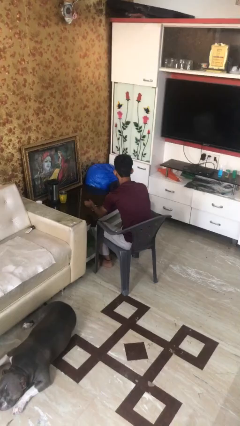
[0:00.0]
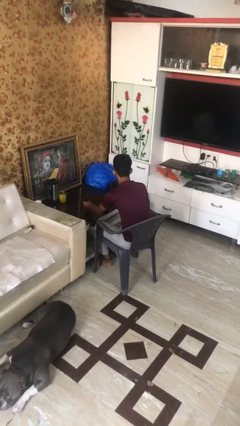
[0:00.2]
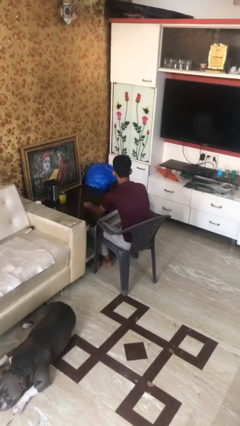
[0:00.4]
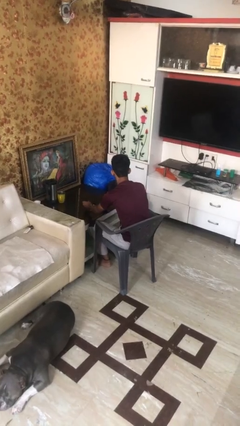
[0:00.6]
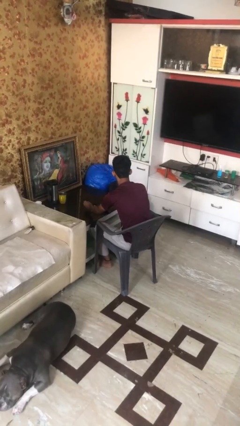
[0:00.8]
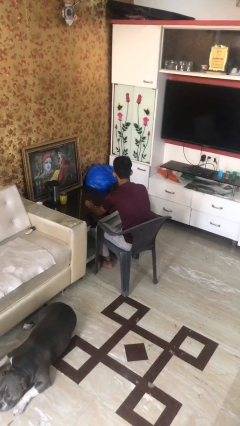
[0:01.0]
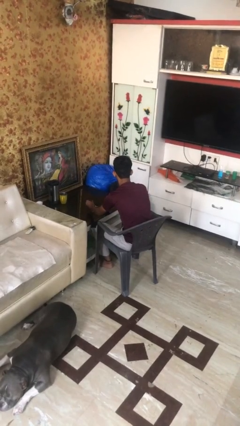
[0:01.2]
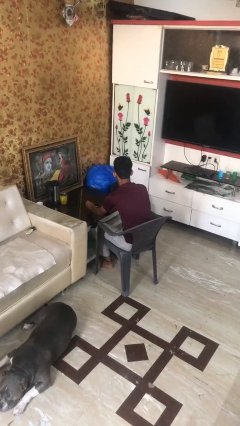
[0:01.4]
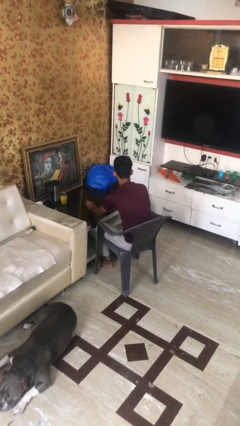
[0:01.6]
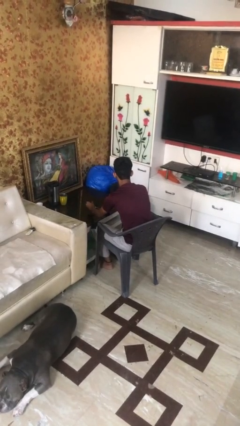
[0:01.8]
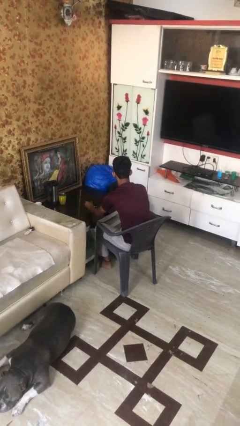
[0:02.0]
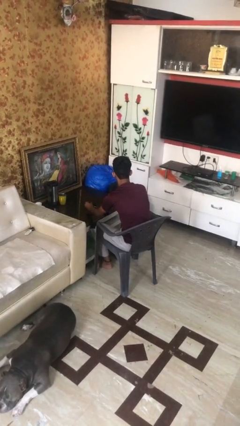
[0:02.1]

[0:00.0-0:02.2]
person paints fingernails

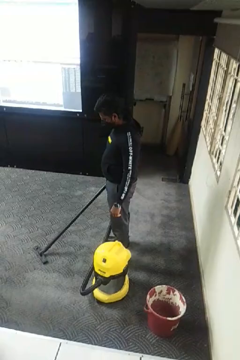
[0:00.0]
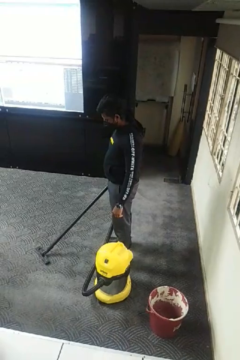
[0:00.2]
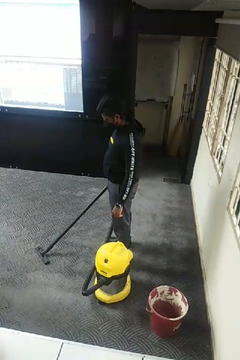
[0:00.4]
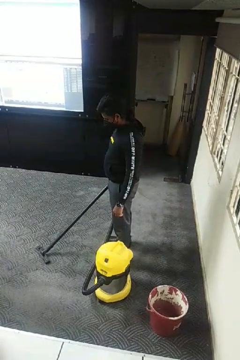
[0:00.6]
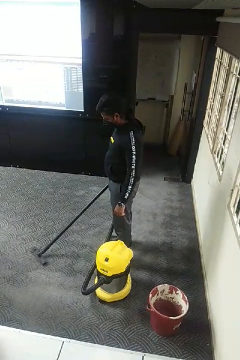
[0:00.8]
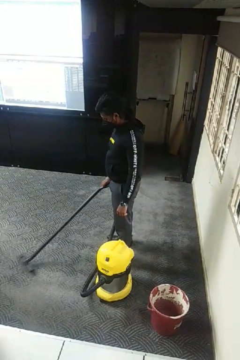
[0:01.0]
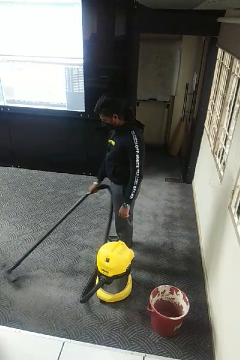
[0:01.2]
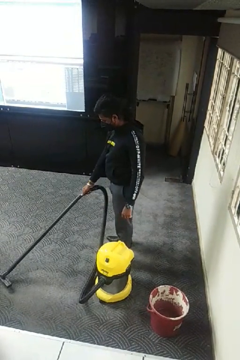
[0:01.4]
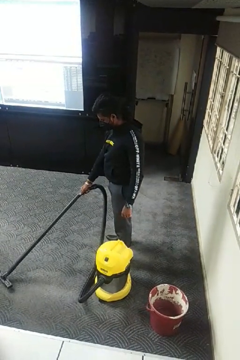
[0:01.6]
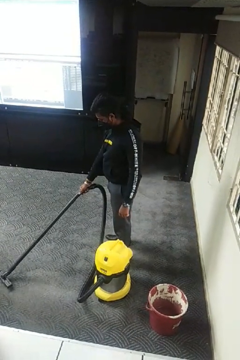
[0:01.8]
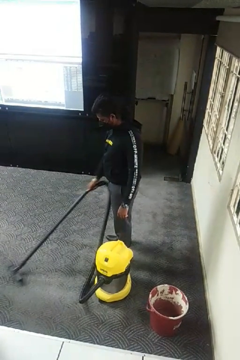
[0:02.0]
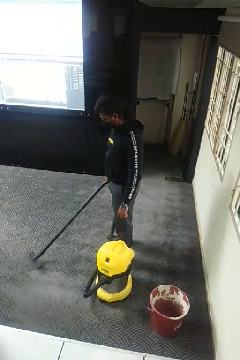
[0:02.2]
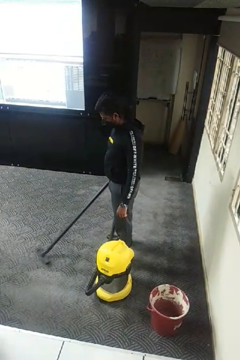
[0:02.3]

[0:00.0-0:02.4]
person vacuums carpet

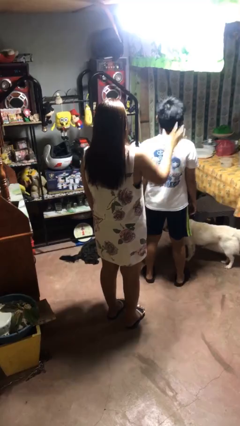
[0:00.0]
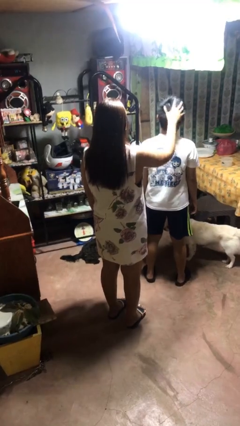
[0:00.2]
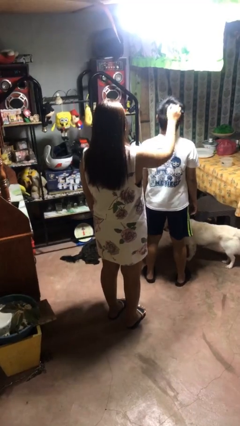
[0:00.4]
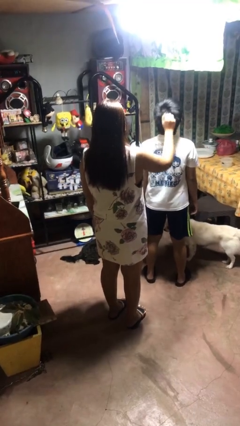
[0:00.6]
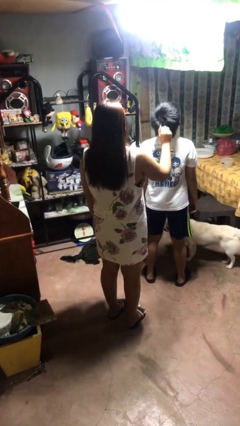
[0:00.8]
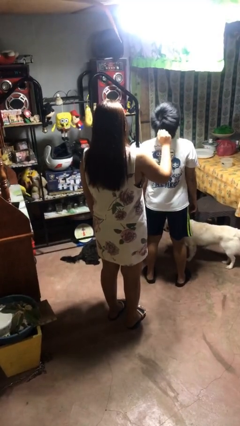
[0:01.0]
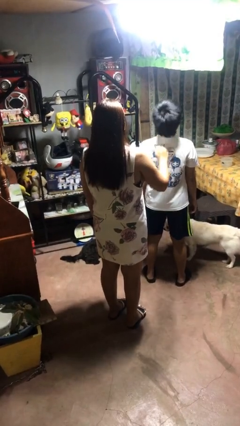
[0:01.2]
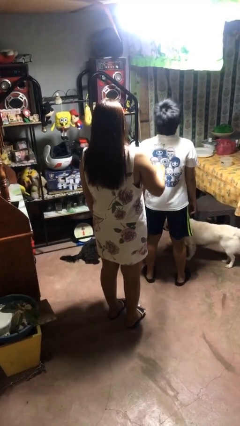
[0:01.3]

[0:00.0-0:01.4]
person grabs person by hair

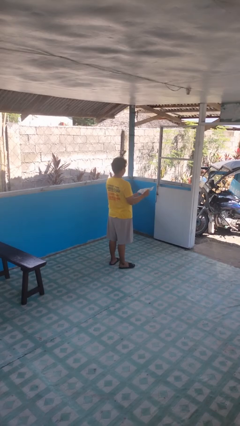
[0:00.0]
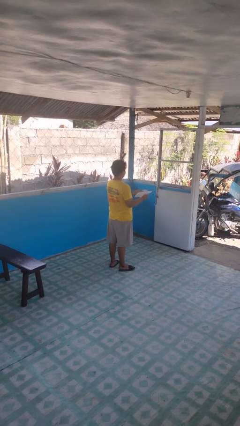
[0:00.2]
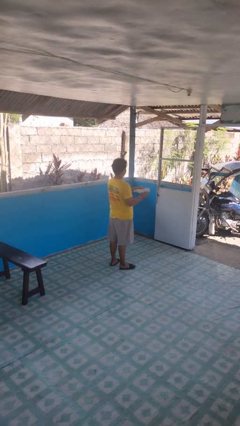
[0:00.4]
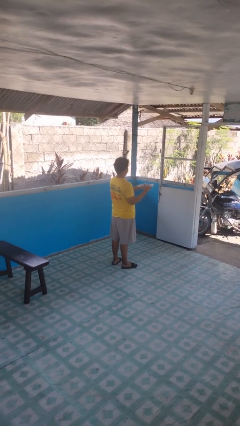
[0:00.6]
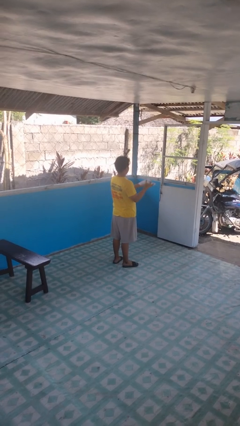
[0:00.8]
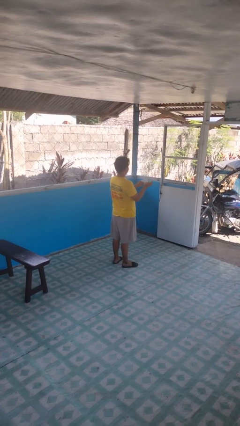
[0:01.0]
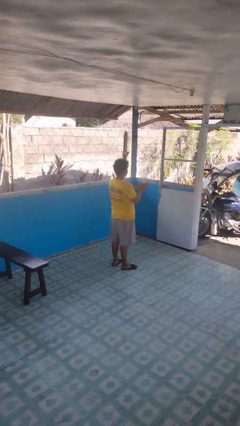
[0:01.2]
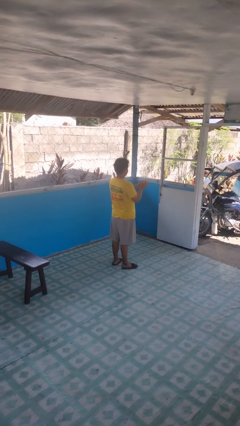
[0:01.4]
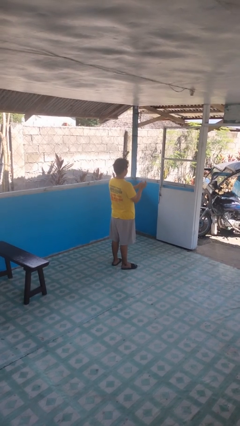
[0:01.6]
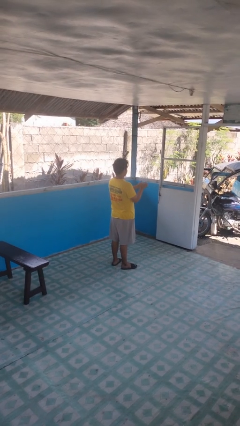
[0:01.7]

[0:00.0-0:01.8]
person crumples paper

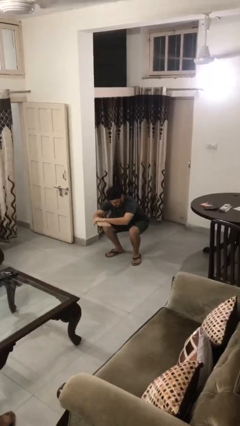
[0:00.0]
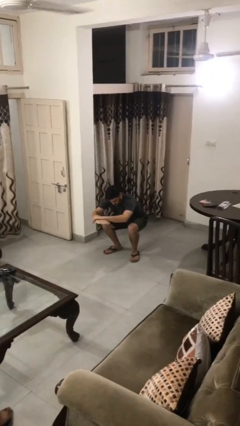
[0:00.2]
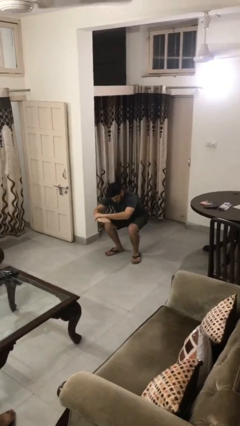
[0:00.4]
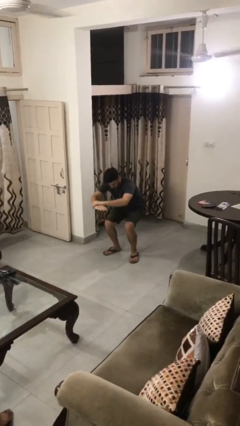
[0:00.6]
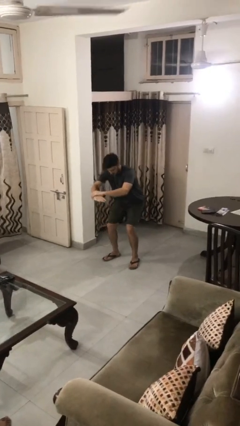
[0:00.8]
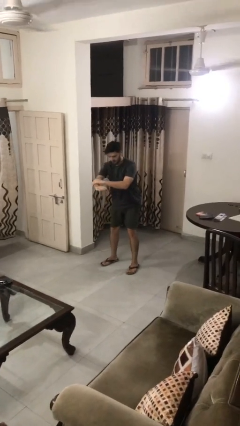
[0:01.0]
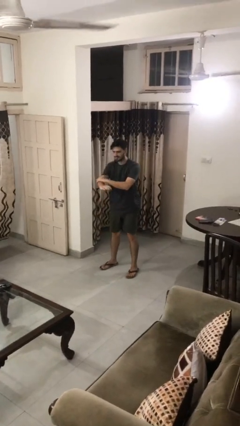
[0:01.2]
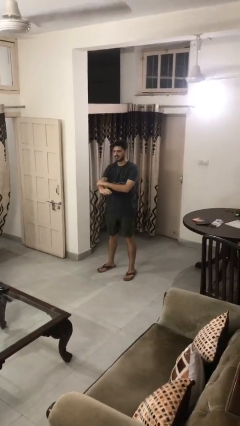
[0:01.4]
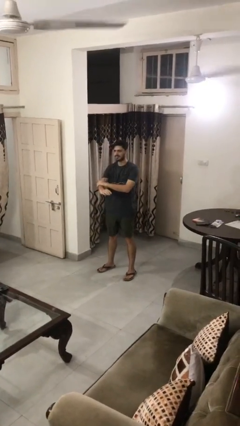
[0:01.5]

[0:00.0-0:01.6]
person stands up

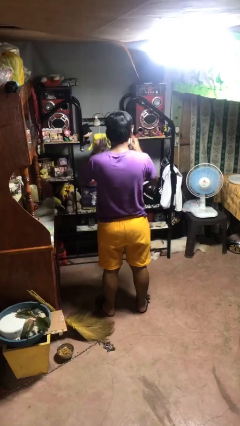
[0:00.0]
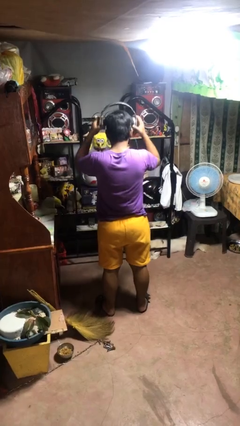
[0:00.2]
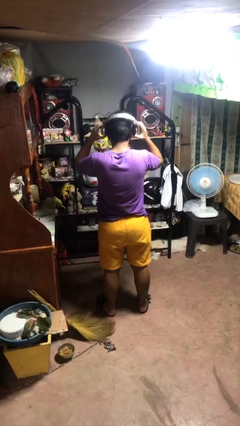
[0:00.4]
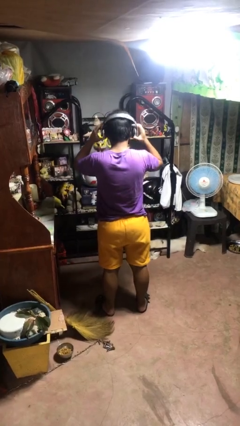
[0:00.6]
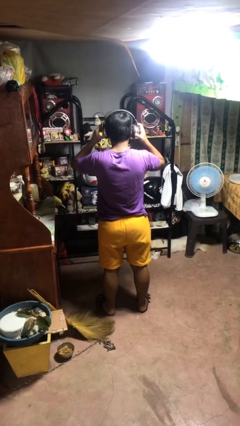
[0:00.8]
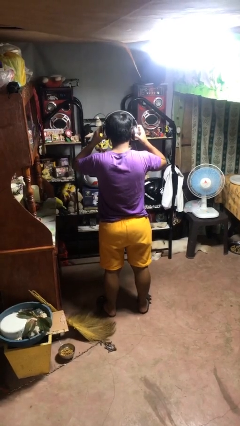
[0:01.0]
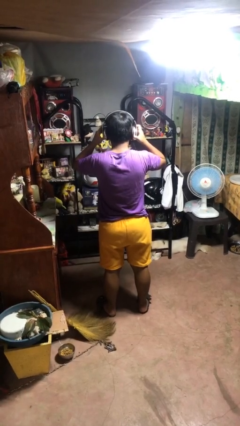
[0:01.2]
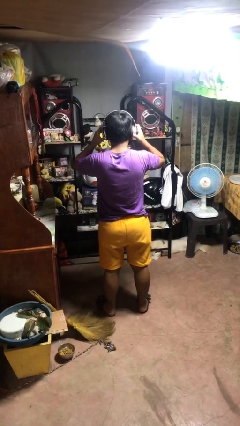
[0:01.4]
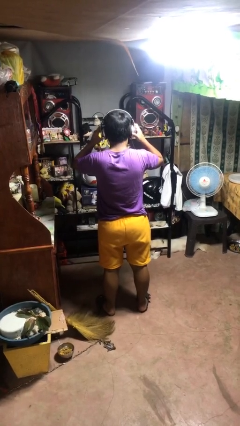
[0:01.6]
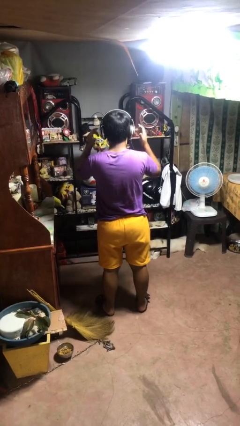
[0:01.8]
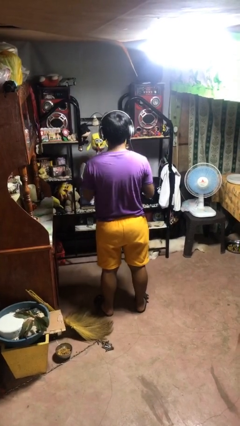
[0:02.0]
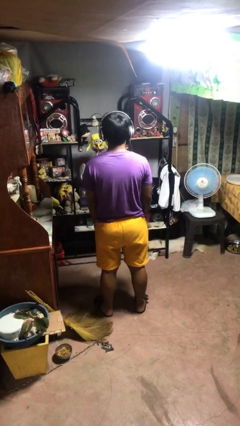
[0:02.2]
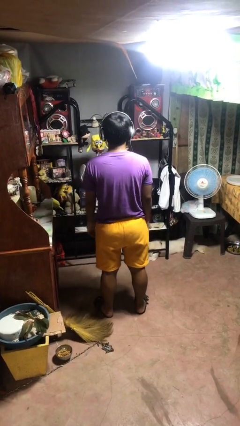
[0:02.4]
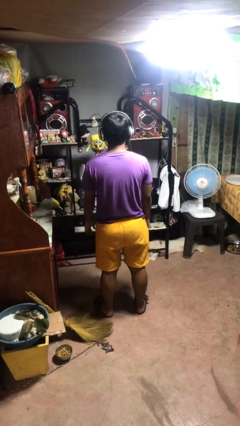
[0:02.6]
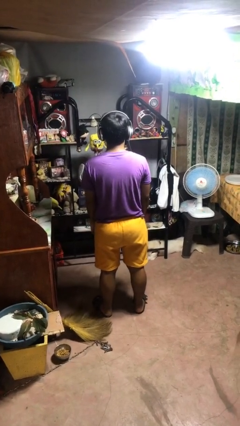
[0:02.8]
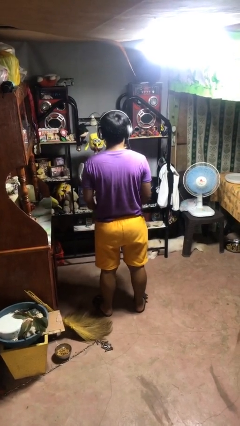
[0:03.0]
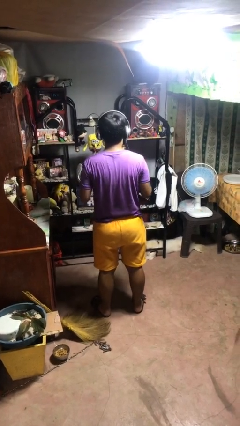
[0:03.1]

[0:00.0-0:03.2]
person puts on headphones

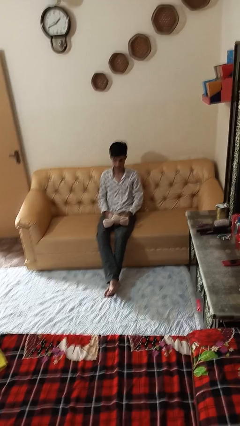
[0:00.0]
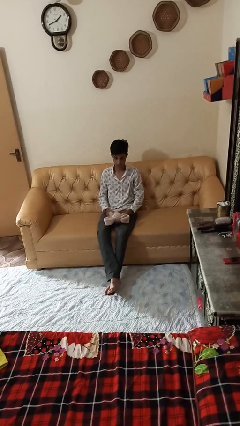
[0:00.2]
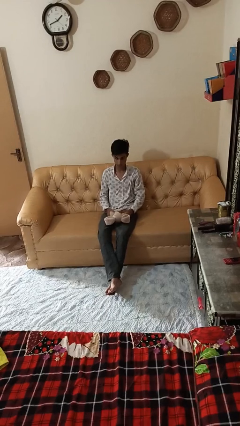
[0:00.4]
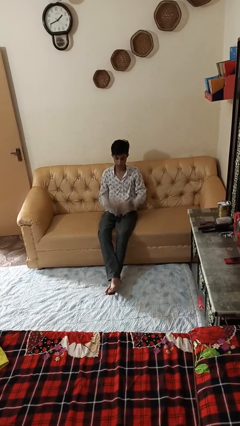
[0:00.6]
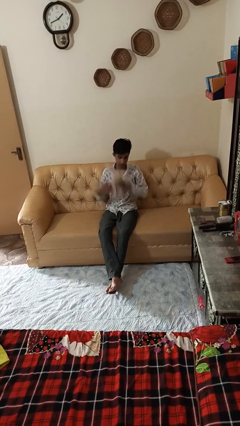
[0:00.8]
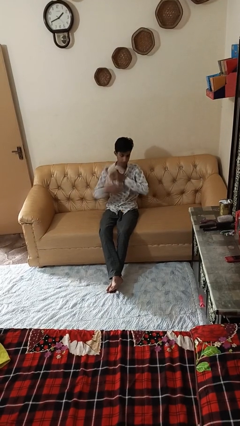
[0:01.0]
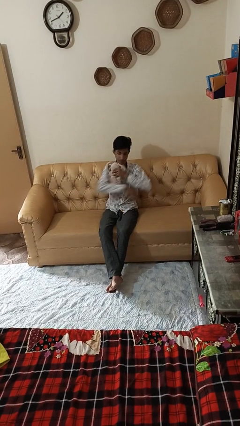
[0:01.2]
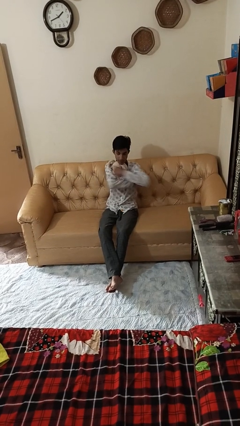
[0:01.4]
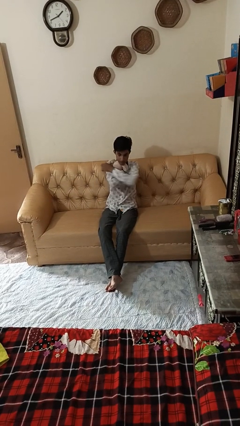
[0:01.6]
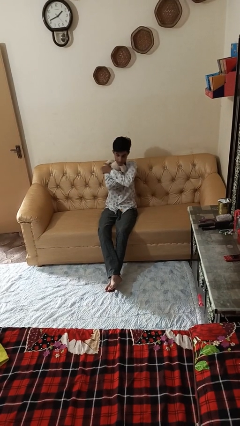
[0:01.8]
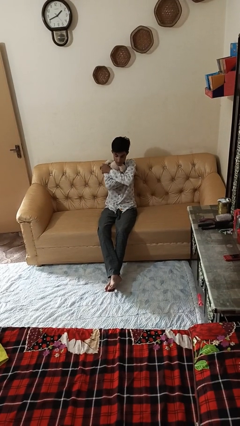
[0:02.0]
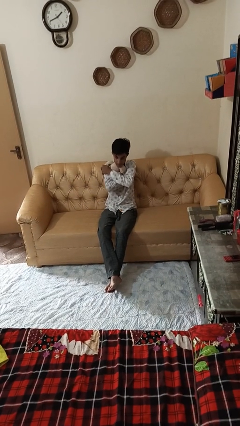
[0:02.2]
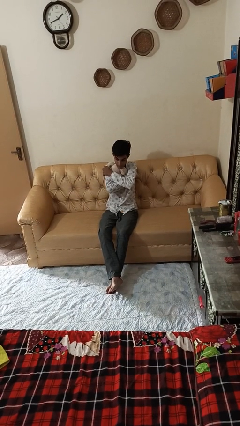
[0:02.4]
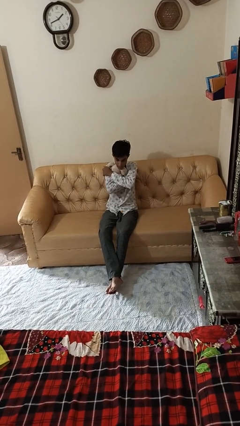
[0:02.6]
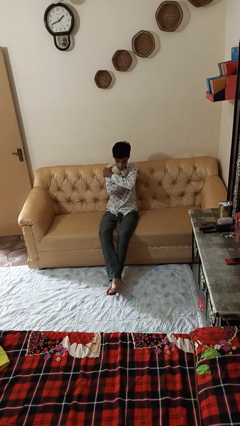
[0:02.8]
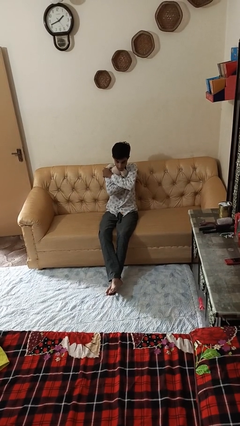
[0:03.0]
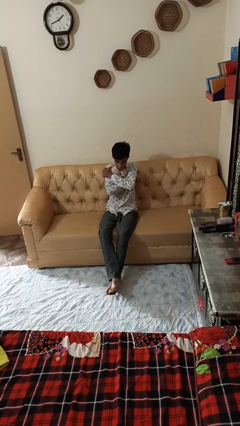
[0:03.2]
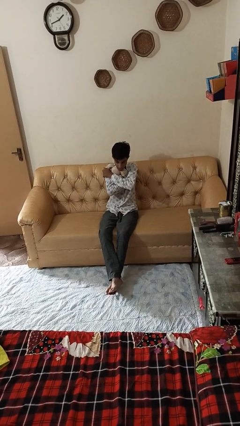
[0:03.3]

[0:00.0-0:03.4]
person hugs stuffed animal

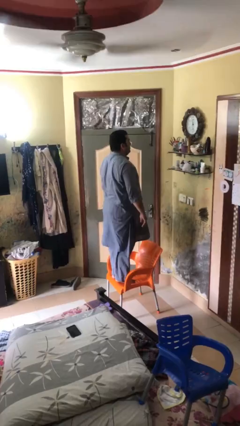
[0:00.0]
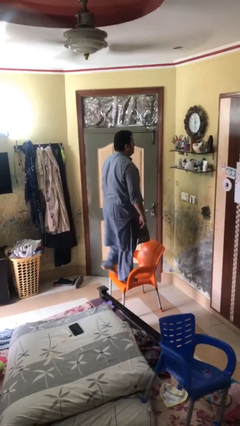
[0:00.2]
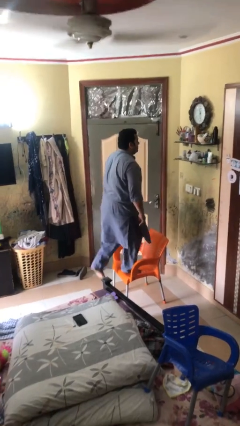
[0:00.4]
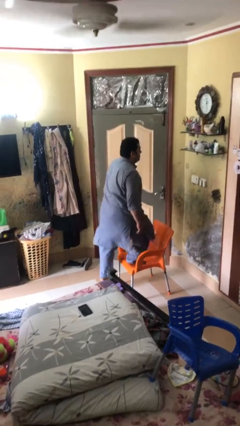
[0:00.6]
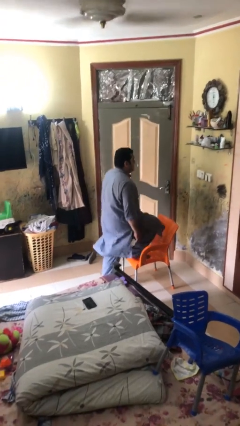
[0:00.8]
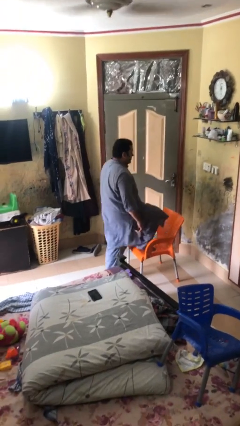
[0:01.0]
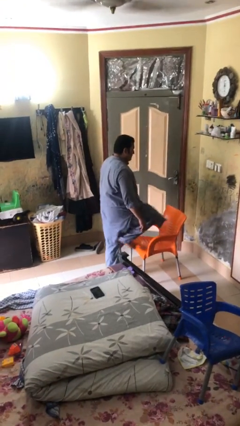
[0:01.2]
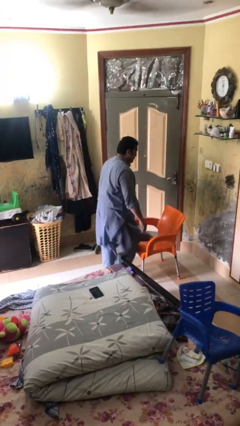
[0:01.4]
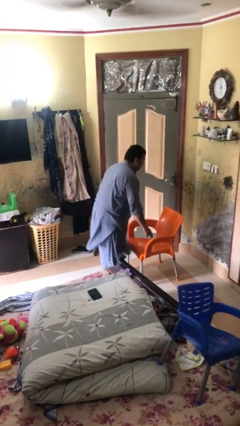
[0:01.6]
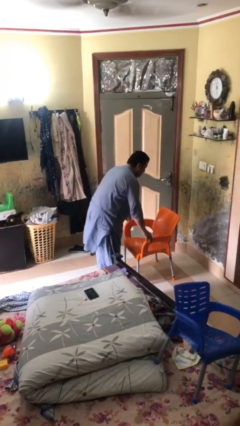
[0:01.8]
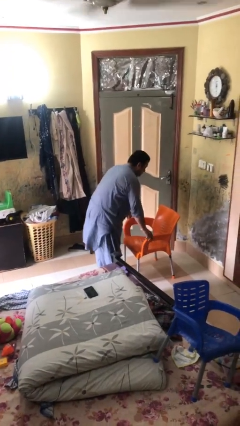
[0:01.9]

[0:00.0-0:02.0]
person climbs off chair
